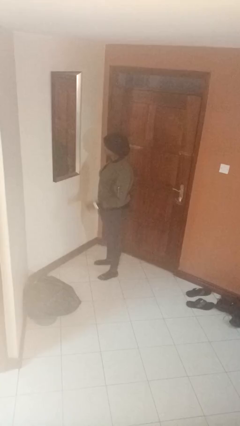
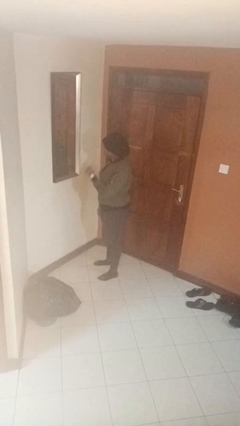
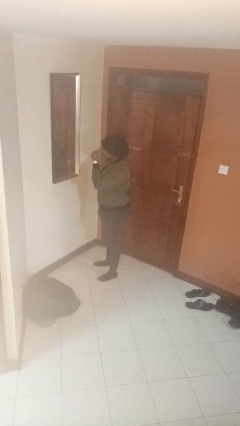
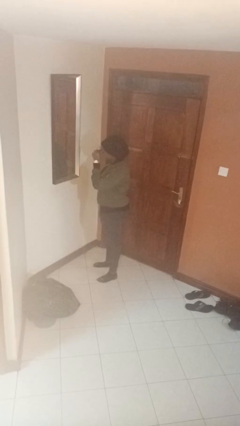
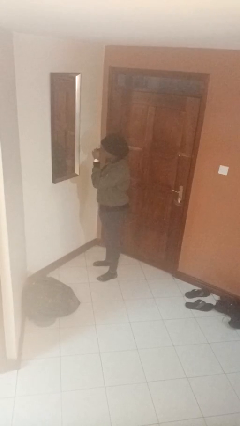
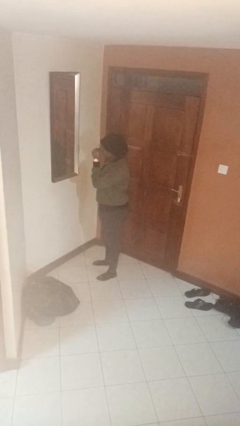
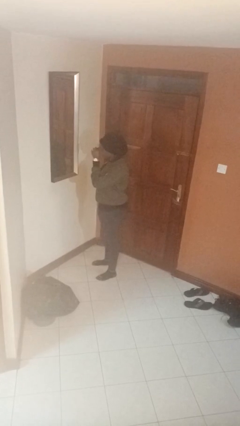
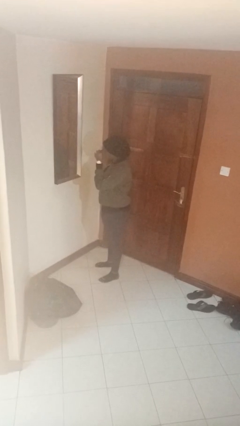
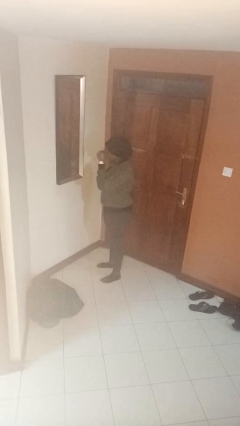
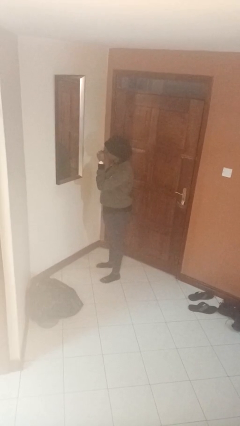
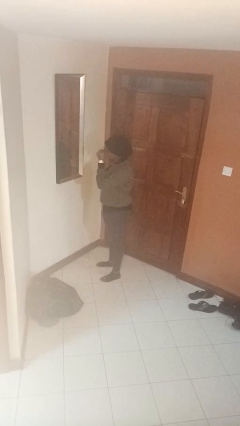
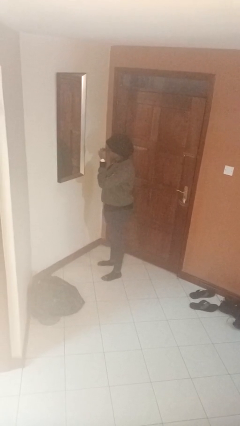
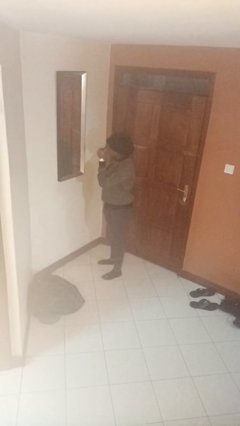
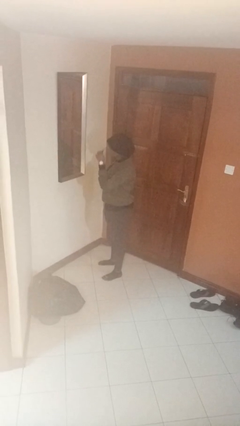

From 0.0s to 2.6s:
person applies eye makeup

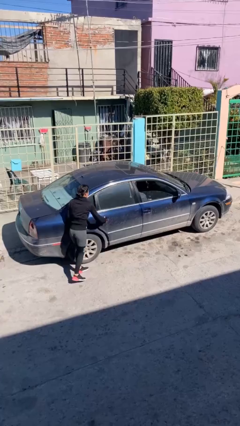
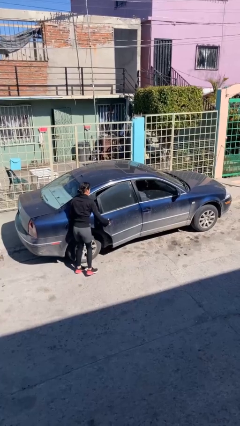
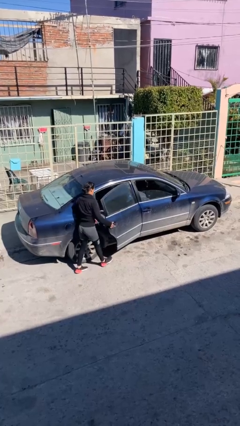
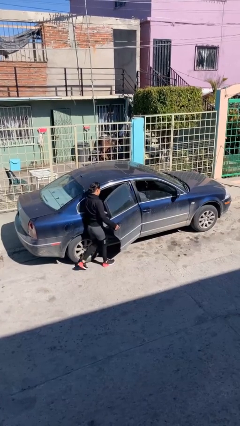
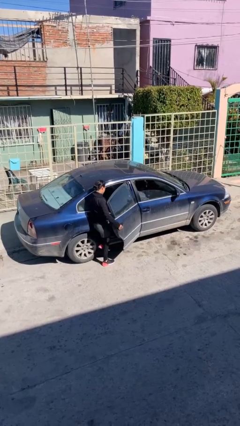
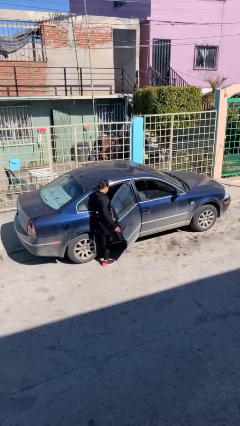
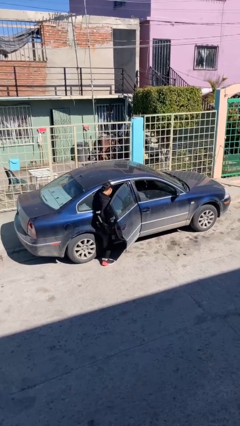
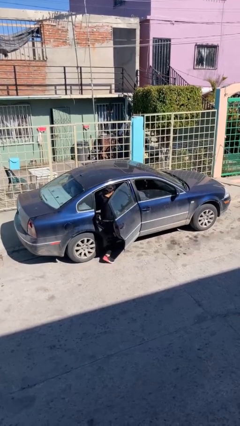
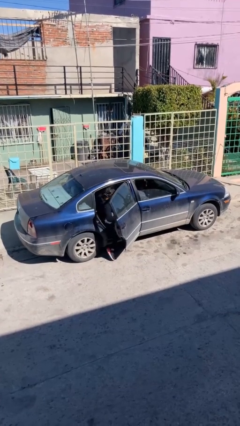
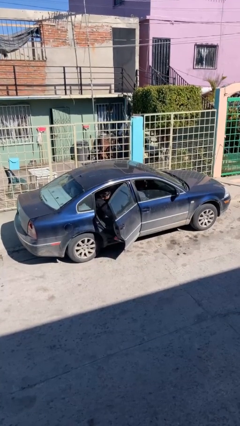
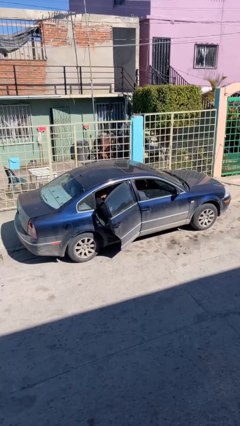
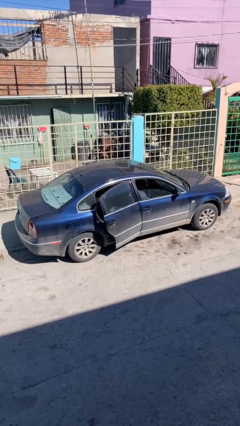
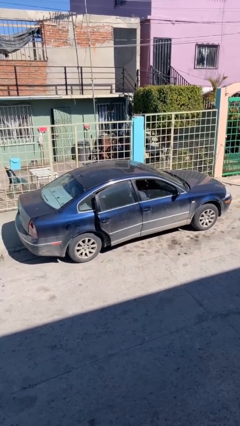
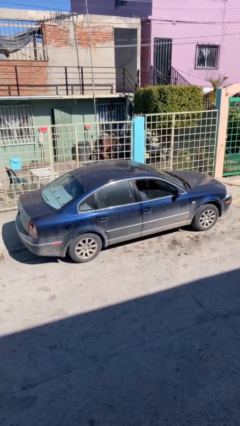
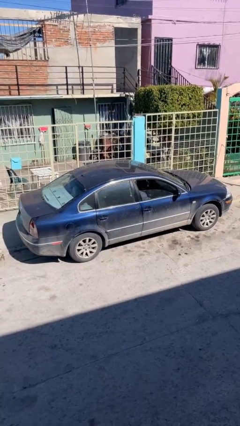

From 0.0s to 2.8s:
car picks up person

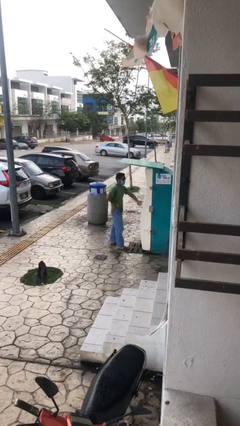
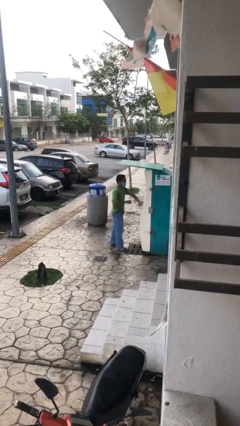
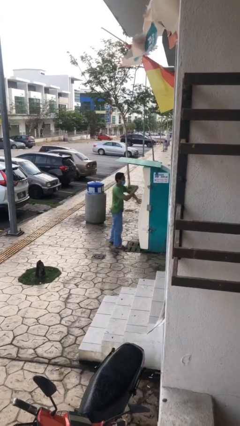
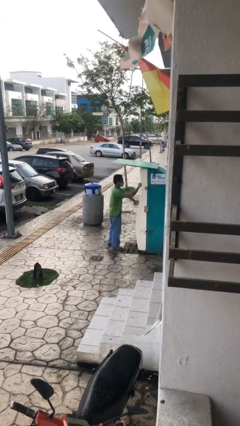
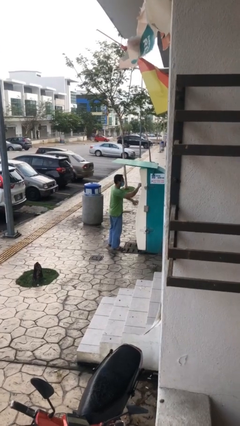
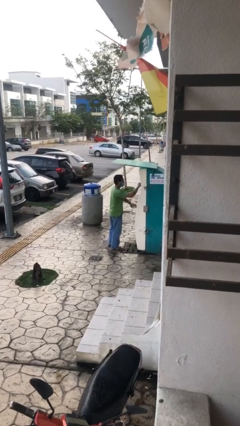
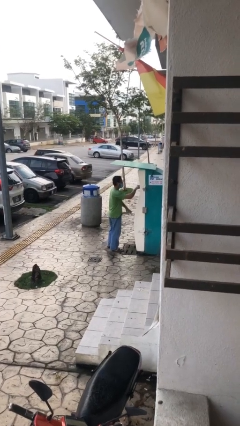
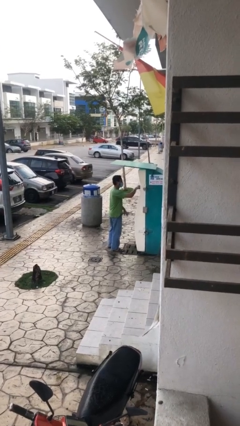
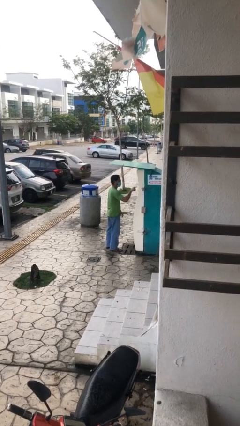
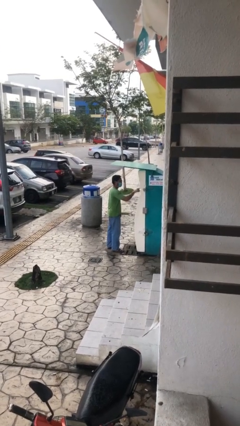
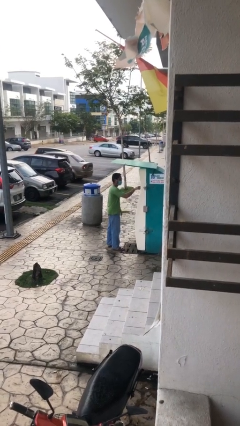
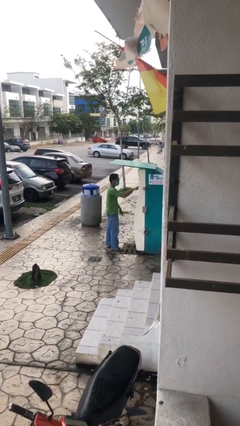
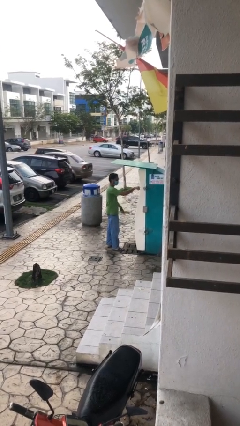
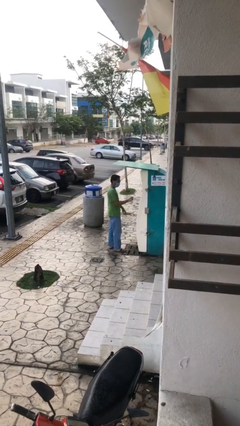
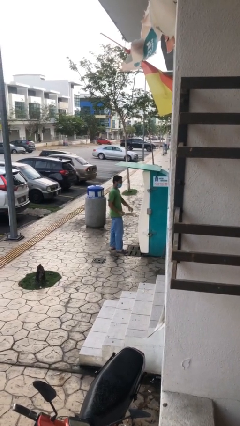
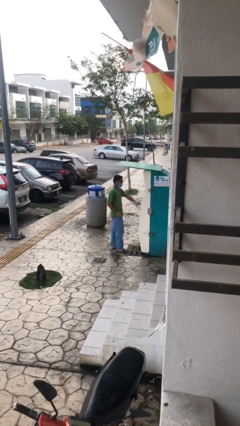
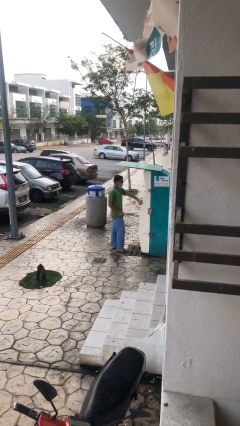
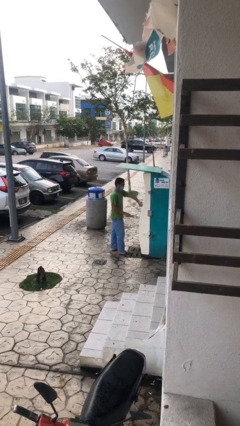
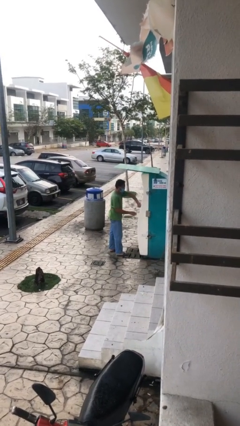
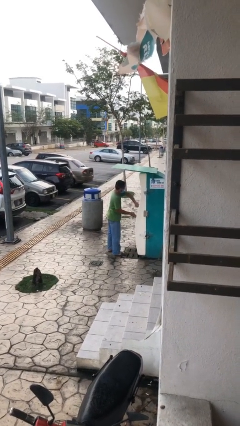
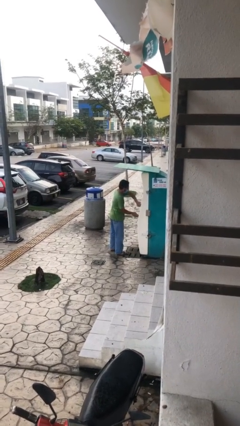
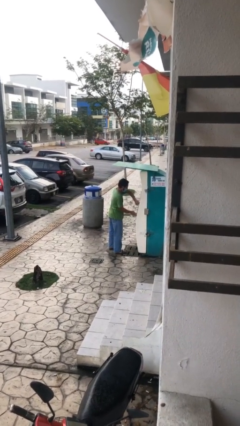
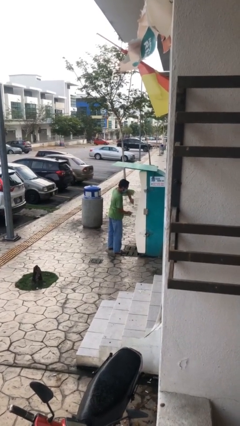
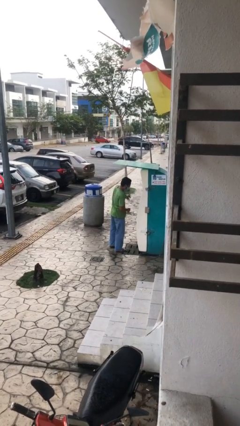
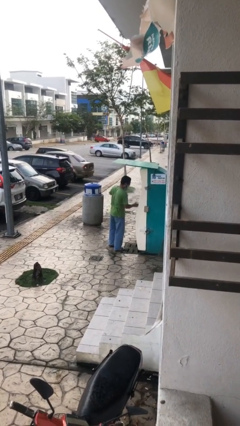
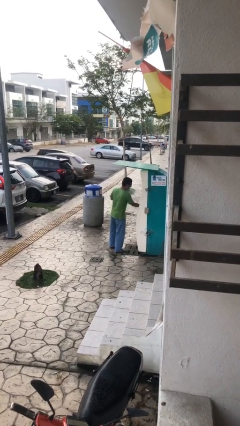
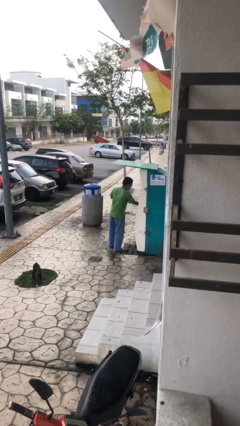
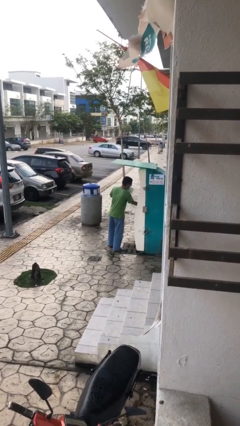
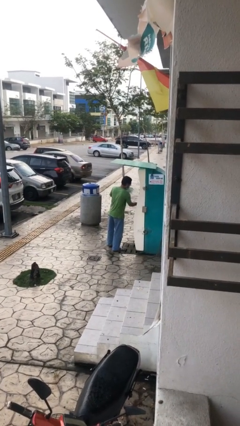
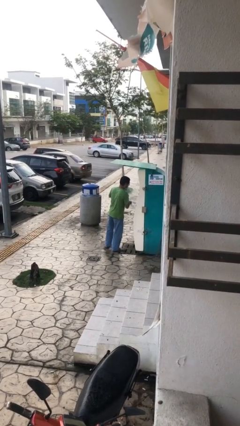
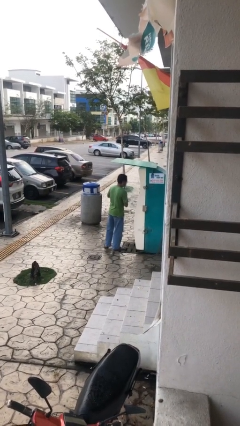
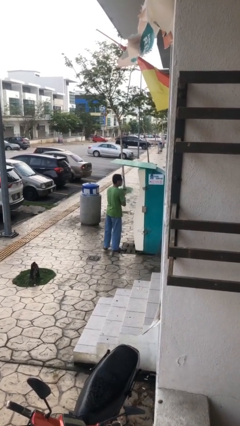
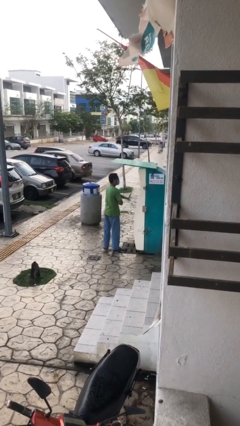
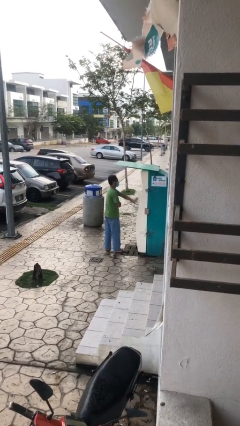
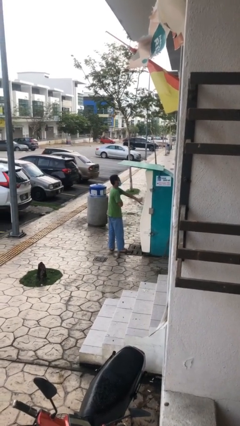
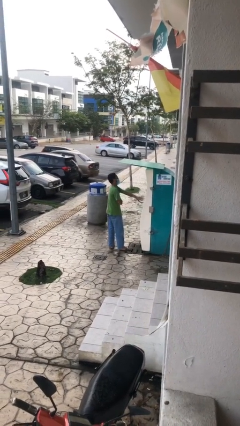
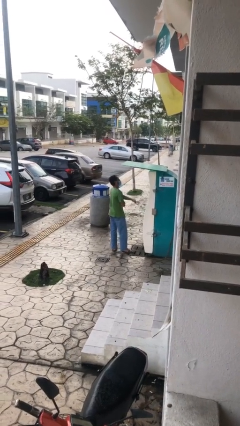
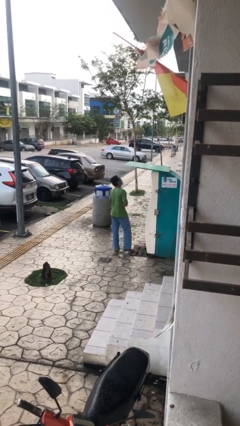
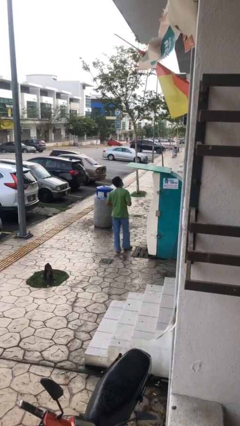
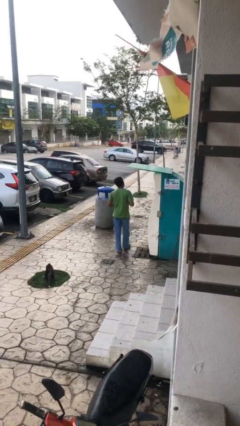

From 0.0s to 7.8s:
person purchases from machine

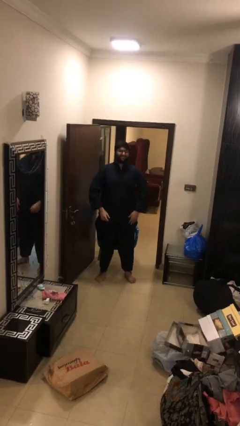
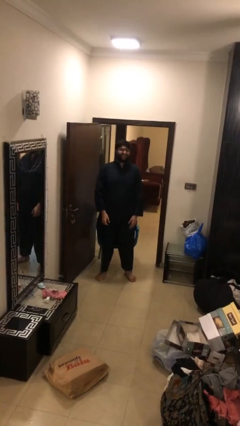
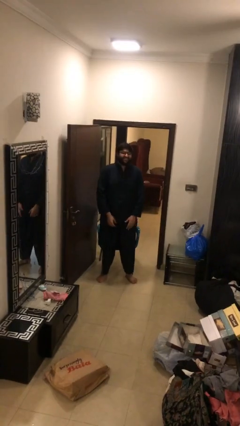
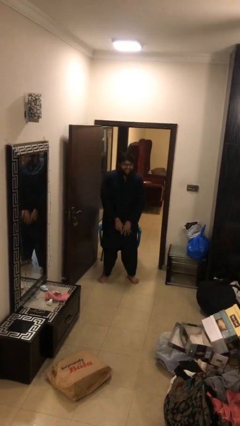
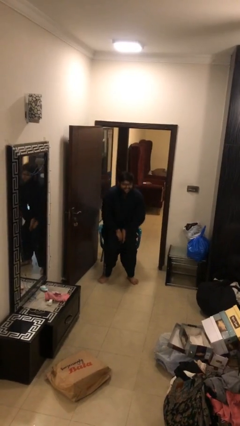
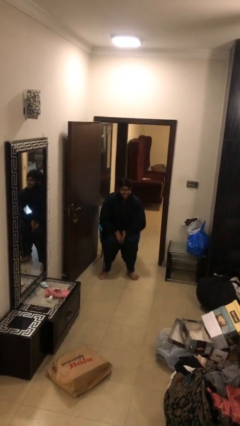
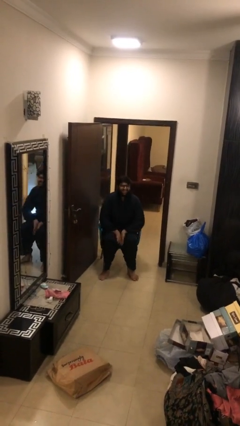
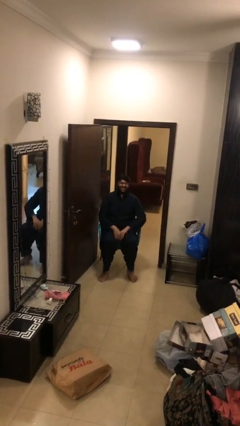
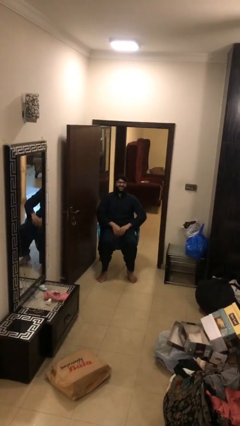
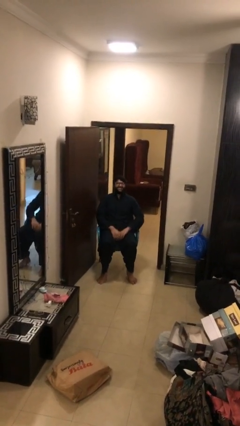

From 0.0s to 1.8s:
person sits down

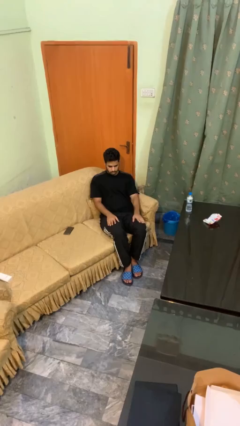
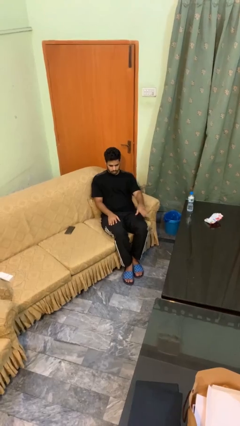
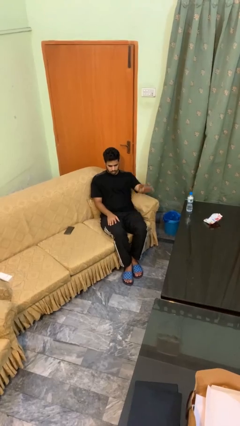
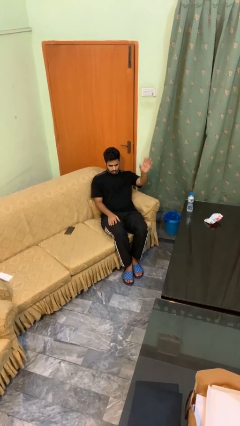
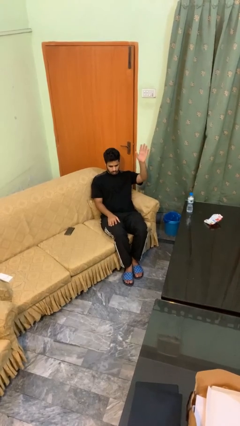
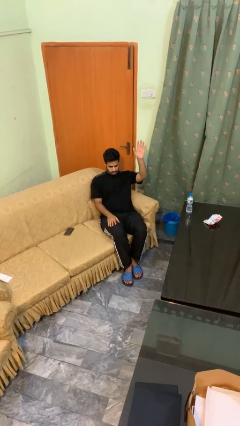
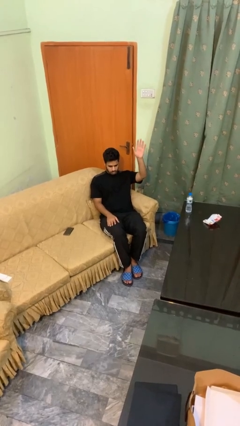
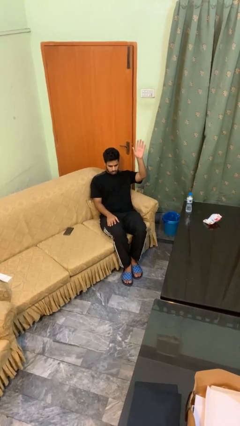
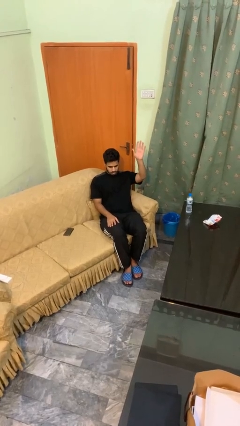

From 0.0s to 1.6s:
person gestures raise hand

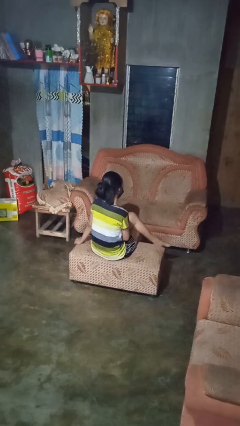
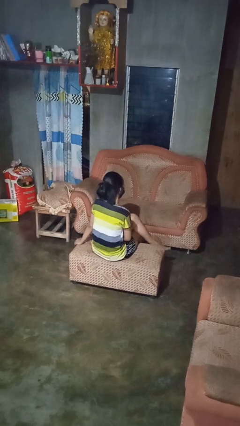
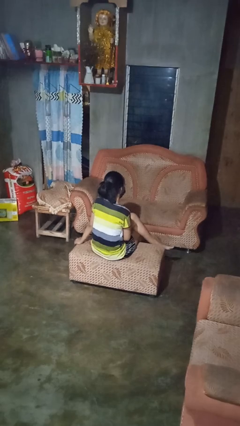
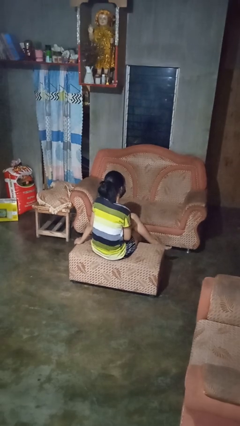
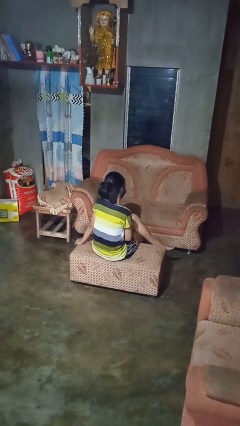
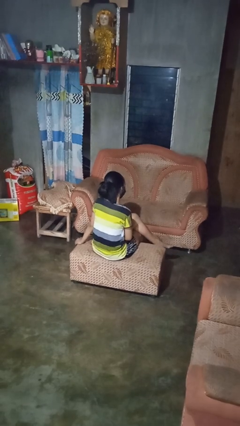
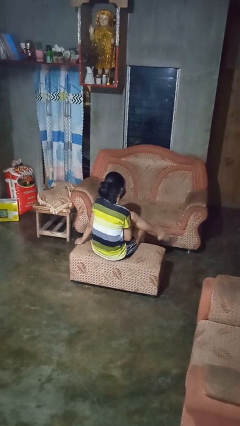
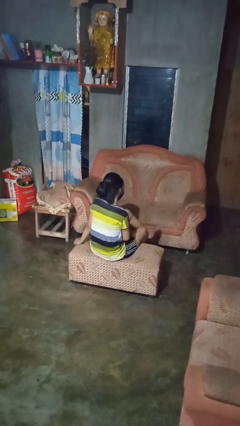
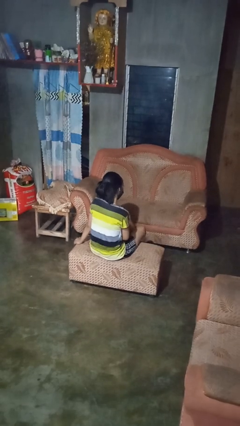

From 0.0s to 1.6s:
person crosses legs
